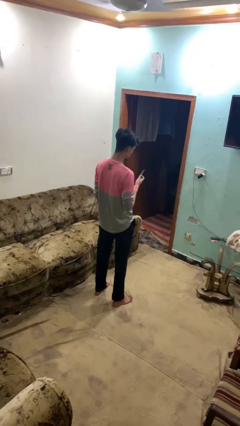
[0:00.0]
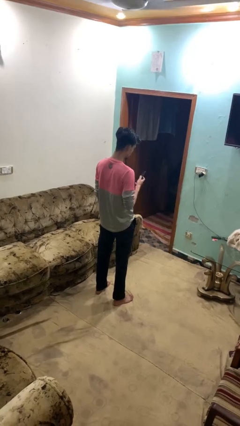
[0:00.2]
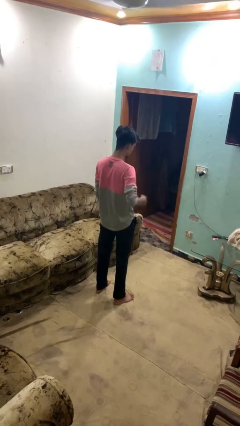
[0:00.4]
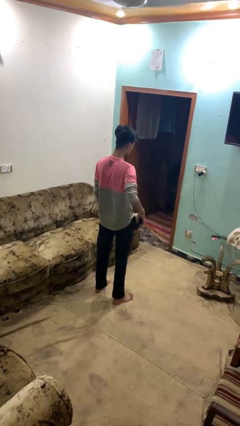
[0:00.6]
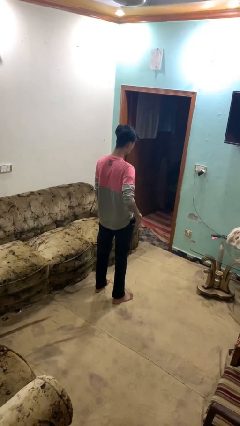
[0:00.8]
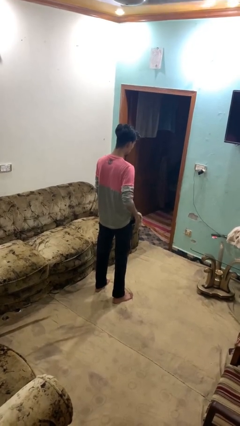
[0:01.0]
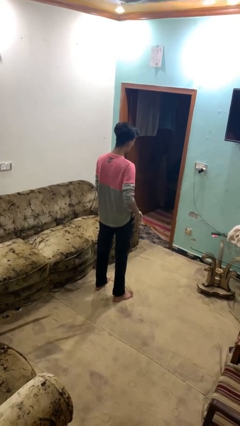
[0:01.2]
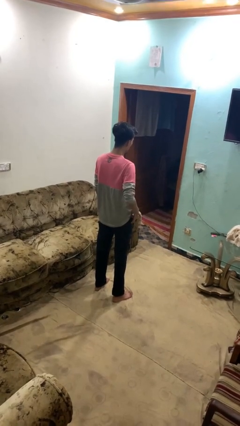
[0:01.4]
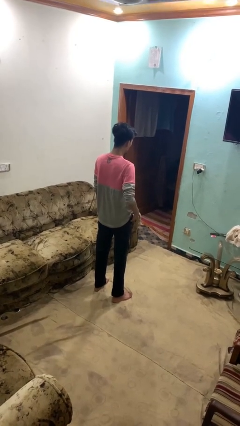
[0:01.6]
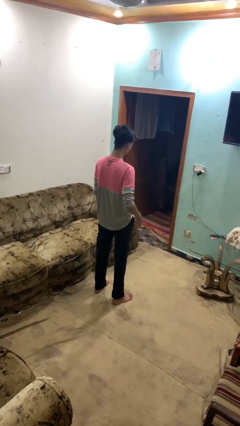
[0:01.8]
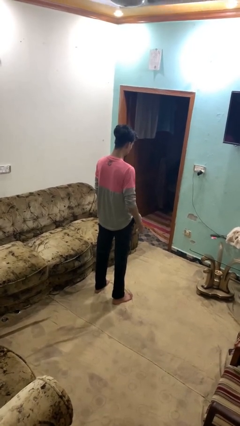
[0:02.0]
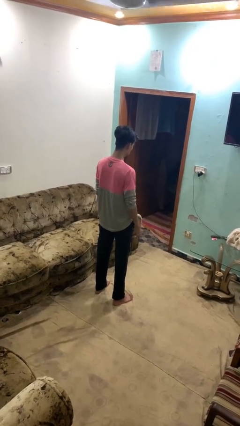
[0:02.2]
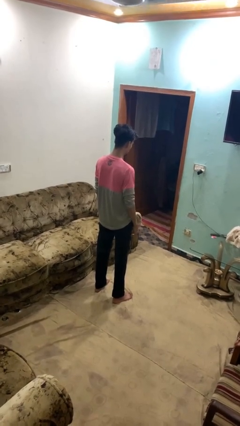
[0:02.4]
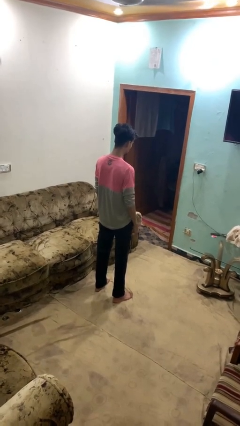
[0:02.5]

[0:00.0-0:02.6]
person puts phone into pocket

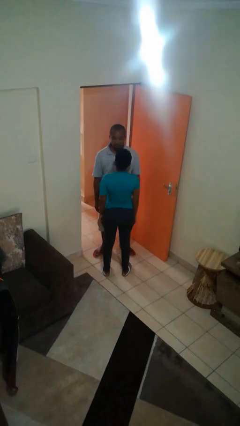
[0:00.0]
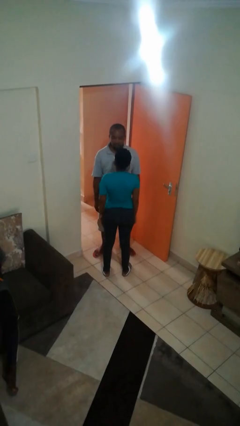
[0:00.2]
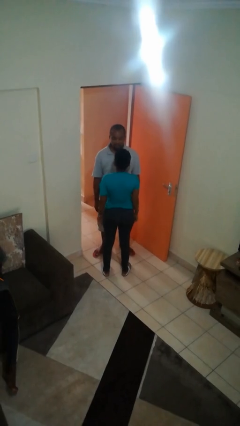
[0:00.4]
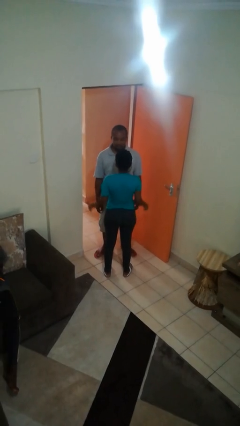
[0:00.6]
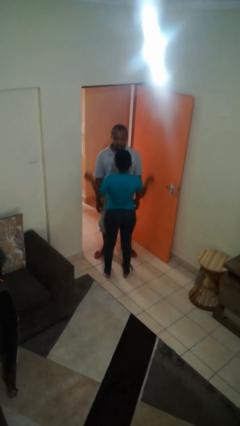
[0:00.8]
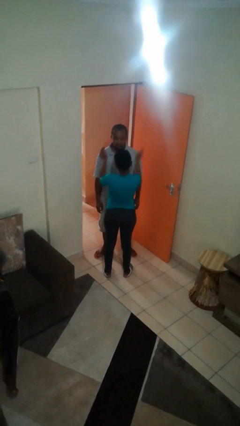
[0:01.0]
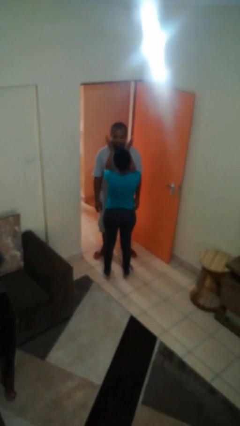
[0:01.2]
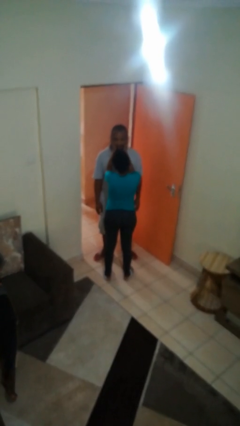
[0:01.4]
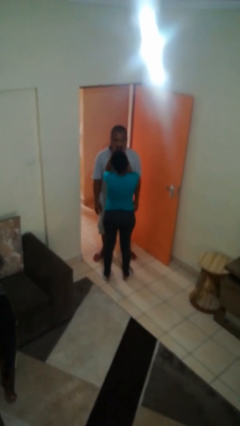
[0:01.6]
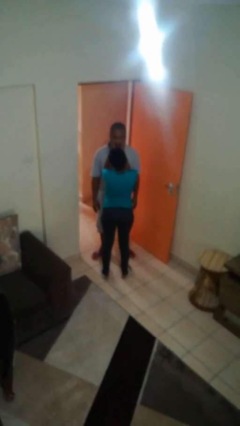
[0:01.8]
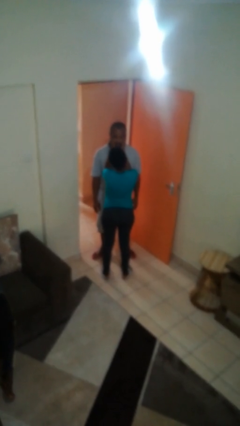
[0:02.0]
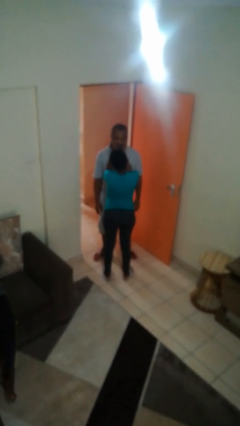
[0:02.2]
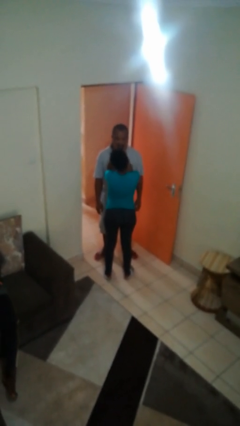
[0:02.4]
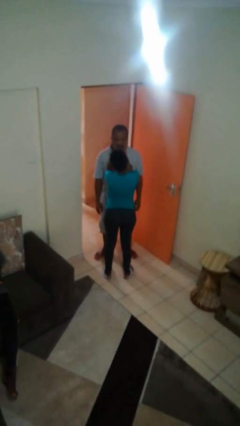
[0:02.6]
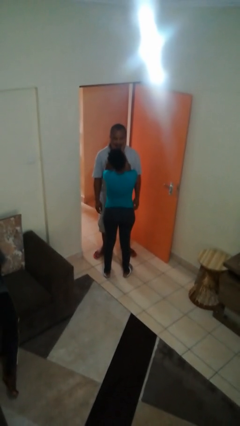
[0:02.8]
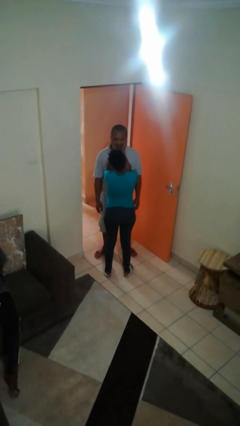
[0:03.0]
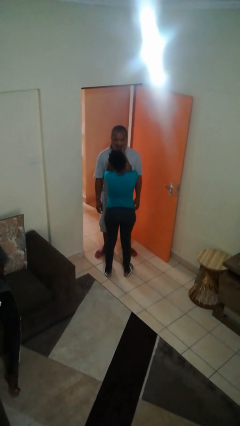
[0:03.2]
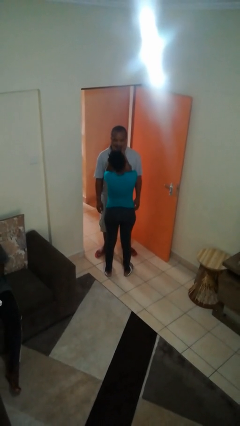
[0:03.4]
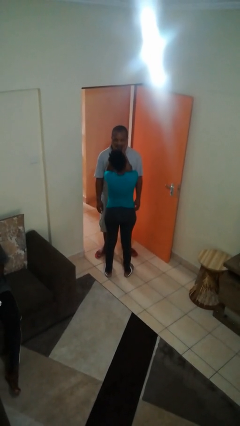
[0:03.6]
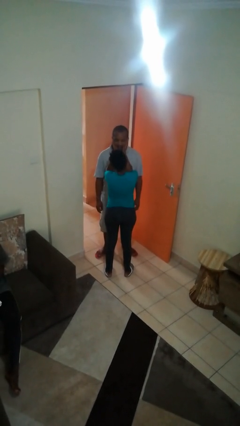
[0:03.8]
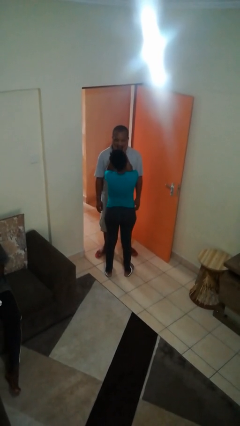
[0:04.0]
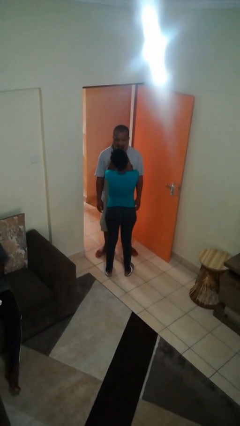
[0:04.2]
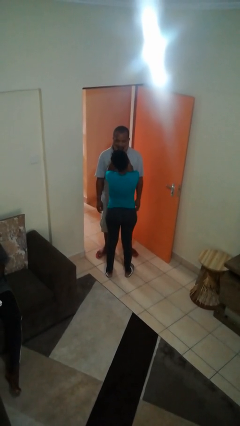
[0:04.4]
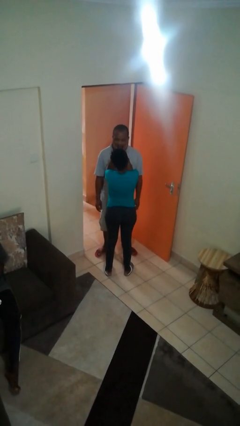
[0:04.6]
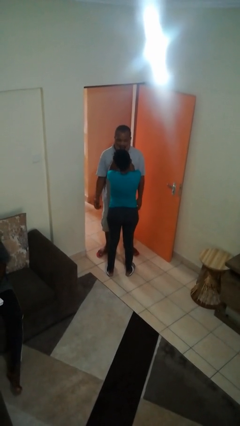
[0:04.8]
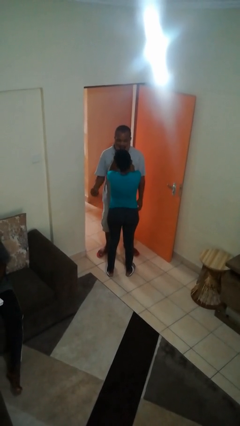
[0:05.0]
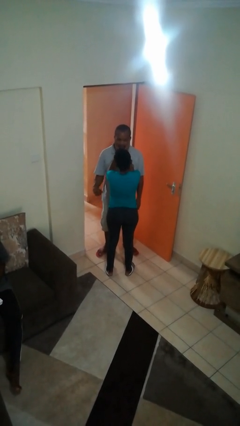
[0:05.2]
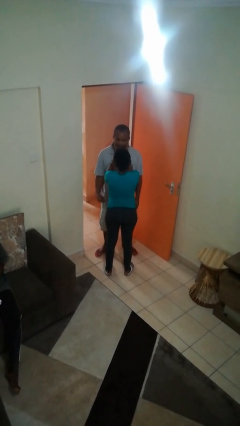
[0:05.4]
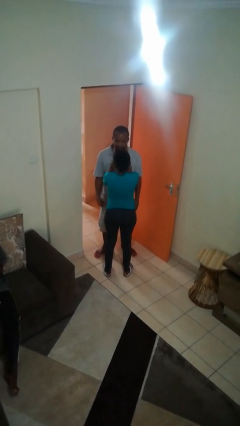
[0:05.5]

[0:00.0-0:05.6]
person touches face of person

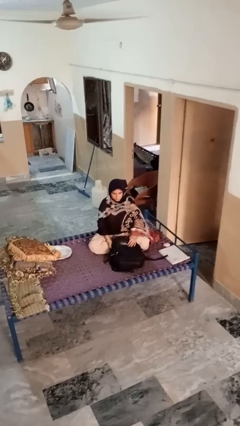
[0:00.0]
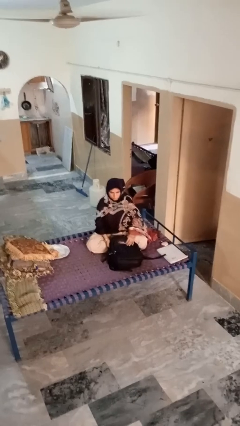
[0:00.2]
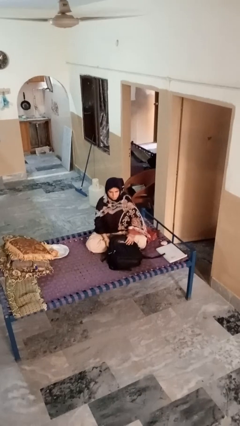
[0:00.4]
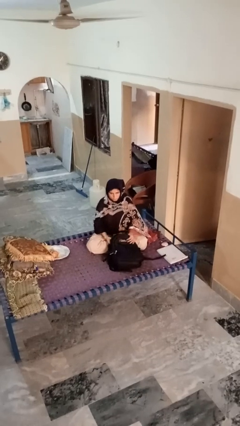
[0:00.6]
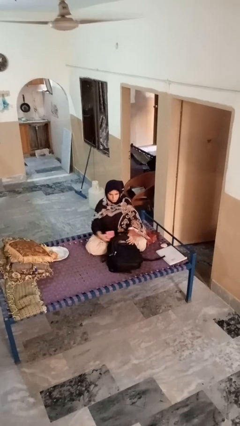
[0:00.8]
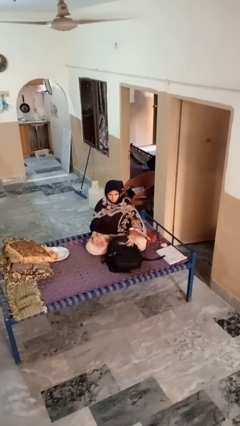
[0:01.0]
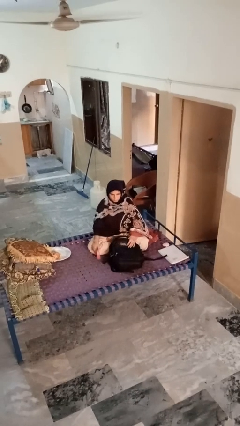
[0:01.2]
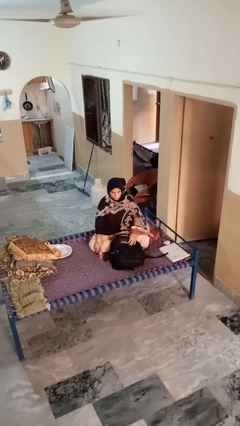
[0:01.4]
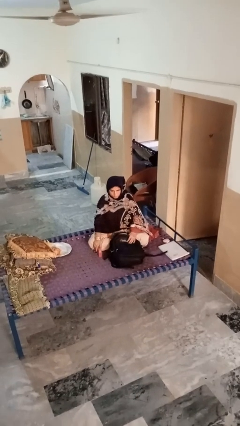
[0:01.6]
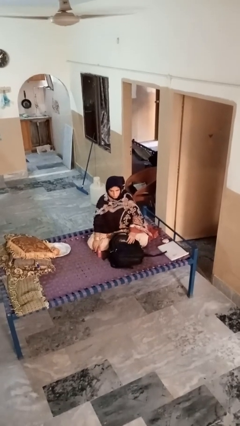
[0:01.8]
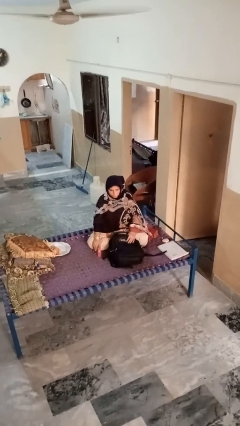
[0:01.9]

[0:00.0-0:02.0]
person takes object from bag

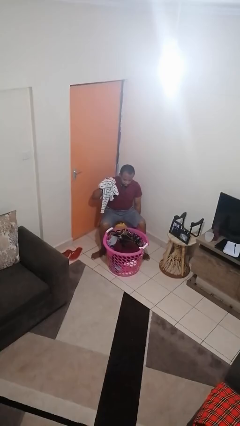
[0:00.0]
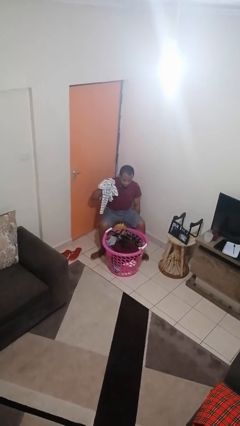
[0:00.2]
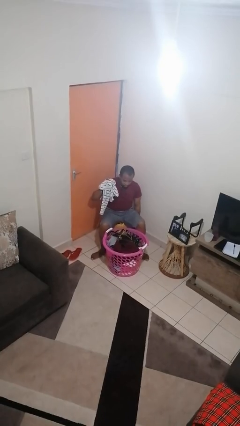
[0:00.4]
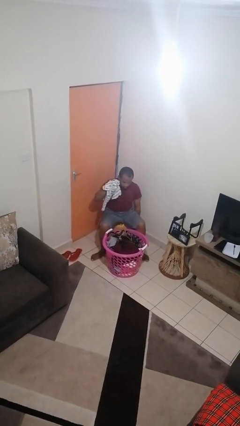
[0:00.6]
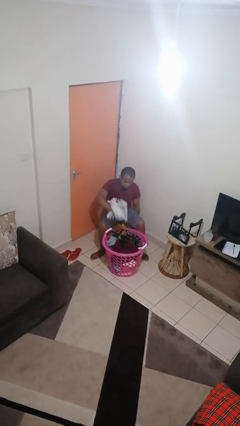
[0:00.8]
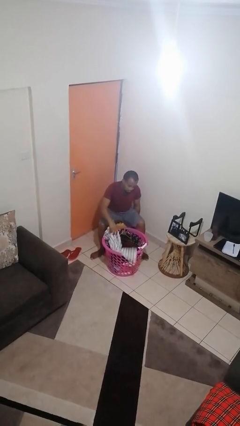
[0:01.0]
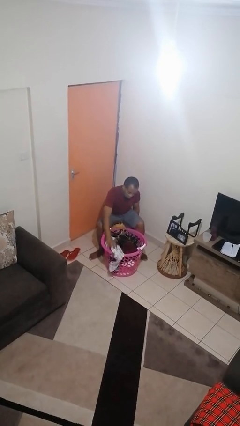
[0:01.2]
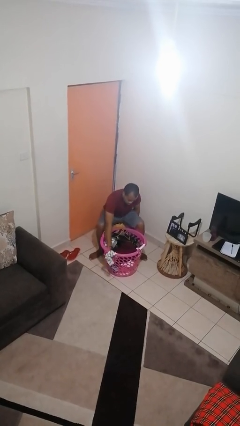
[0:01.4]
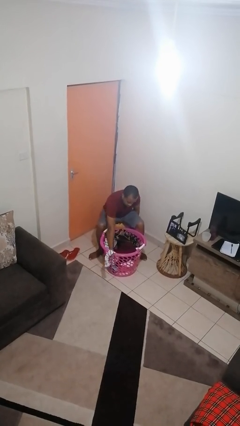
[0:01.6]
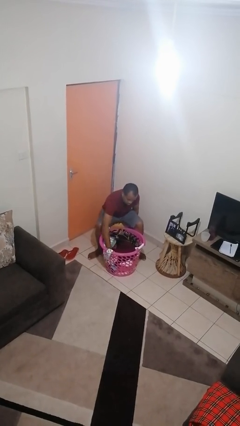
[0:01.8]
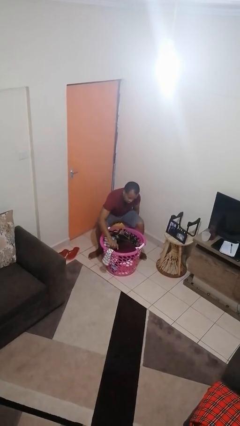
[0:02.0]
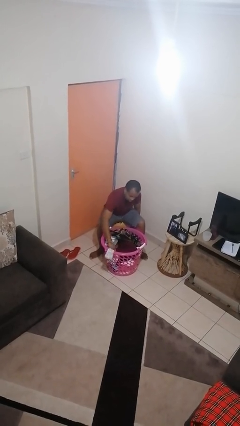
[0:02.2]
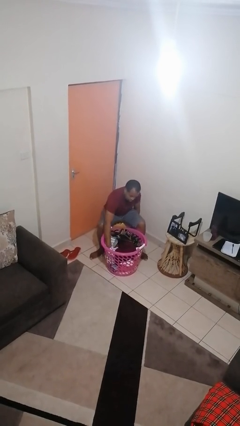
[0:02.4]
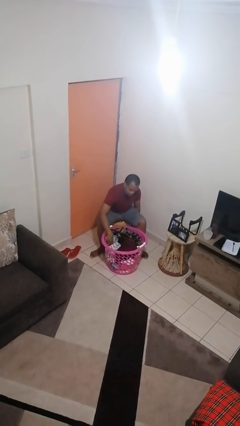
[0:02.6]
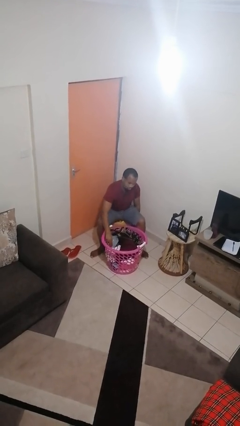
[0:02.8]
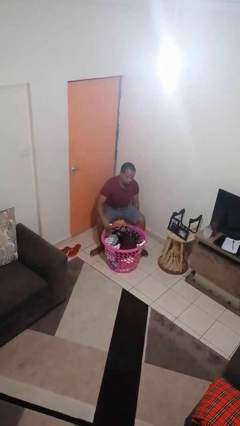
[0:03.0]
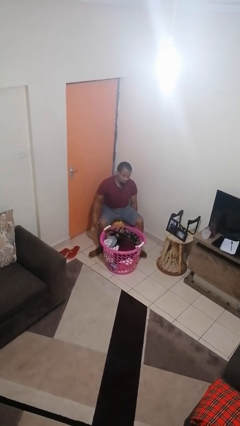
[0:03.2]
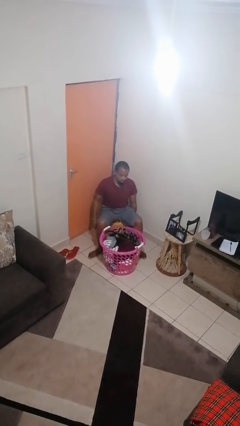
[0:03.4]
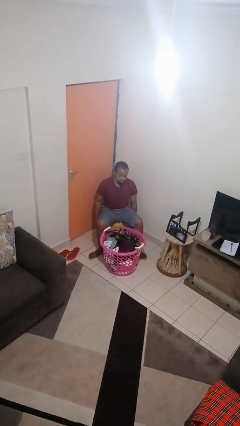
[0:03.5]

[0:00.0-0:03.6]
person puts object into basket

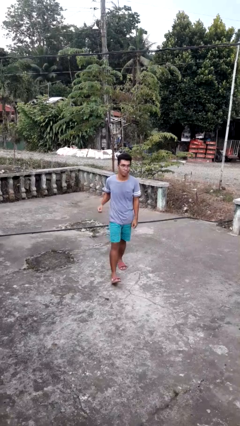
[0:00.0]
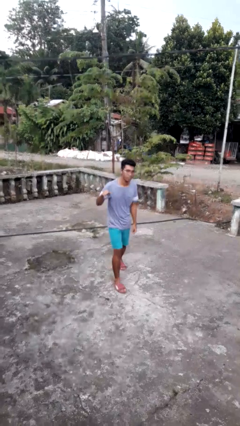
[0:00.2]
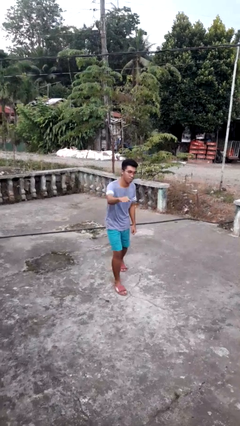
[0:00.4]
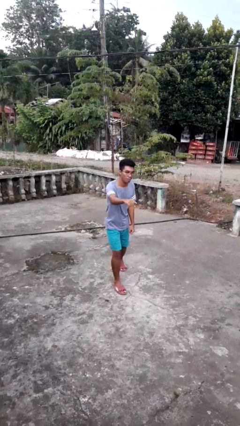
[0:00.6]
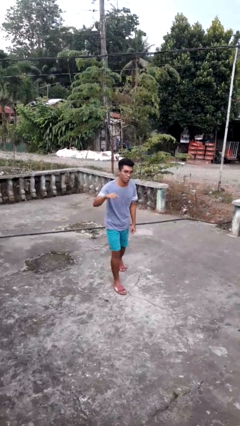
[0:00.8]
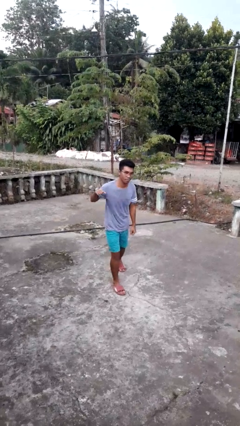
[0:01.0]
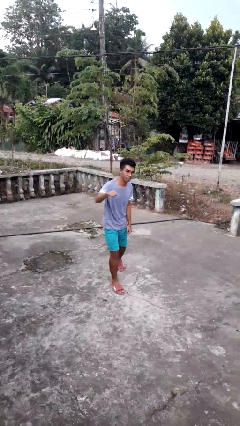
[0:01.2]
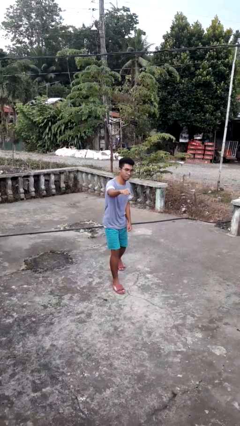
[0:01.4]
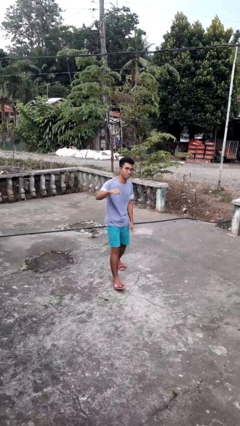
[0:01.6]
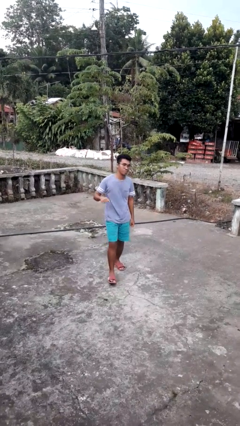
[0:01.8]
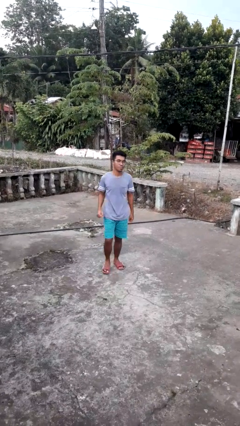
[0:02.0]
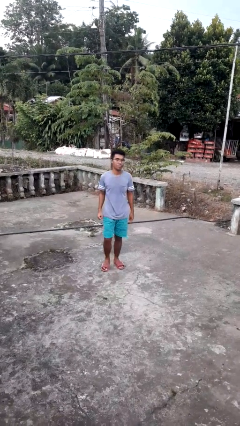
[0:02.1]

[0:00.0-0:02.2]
person punches

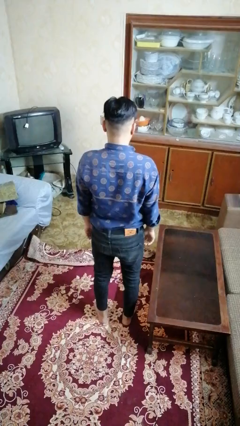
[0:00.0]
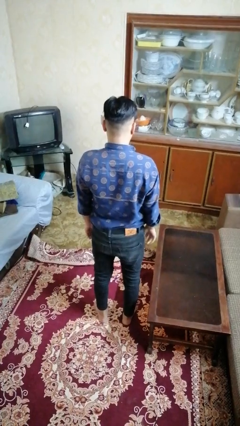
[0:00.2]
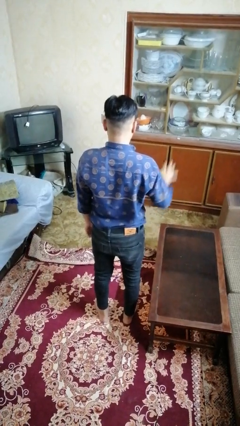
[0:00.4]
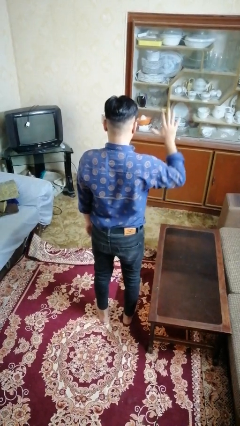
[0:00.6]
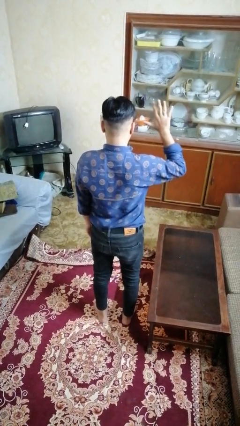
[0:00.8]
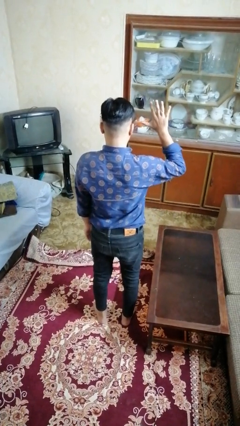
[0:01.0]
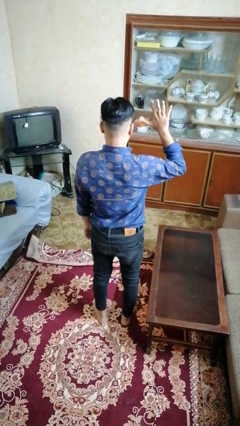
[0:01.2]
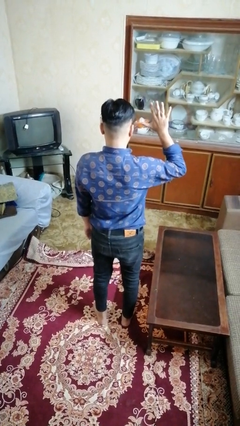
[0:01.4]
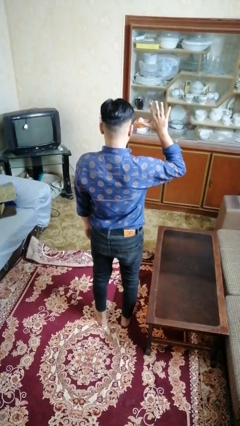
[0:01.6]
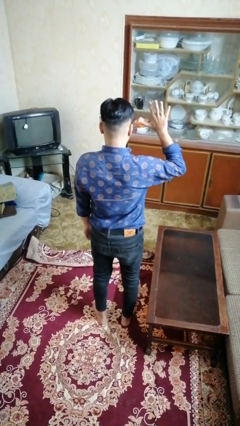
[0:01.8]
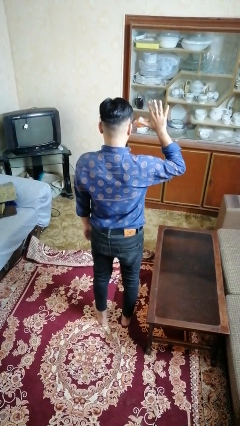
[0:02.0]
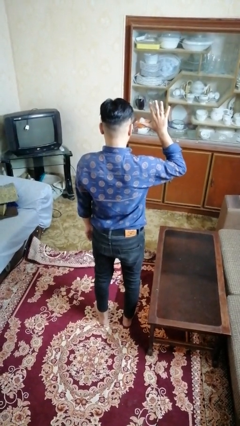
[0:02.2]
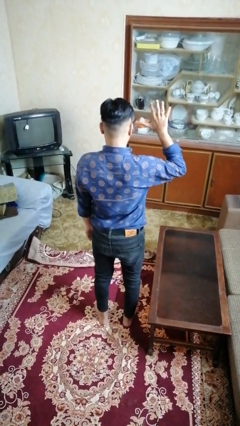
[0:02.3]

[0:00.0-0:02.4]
person gestures number five
